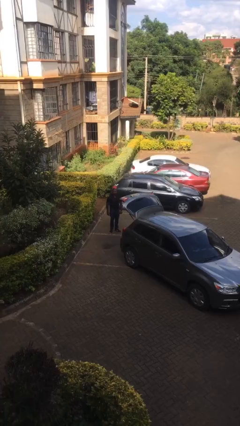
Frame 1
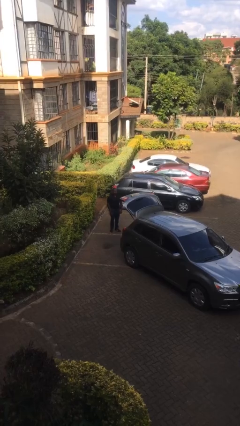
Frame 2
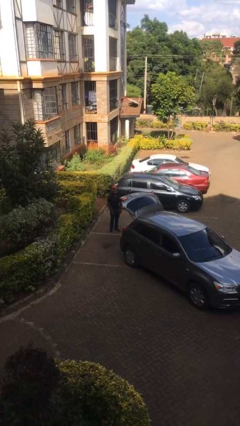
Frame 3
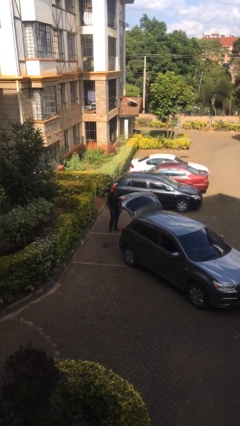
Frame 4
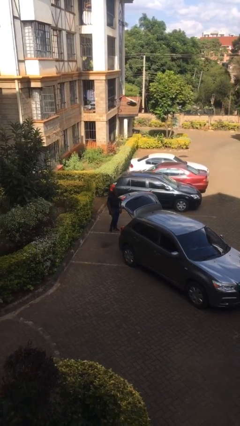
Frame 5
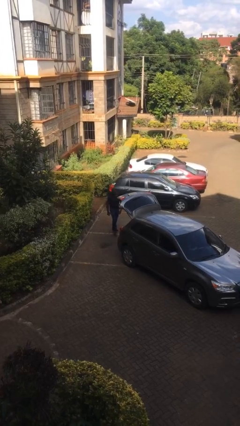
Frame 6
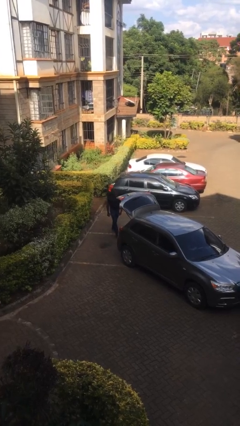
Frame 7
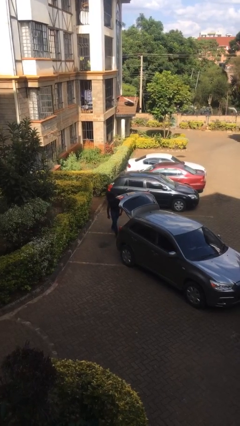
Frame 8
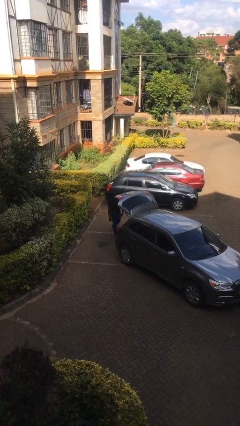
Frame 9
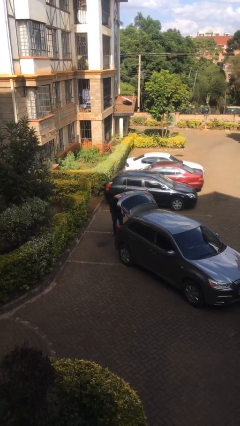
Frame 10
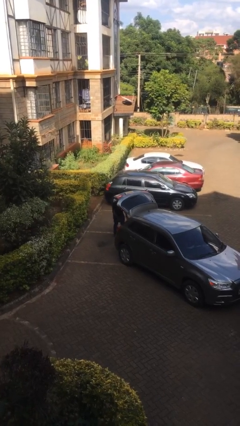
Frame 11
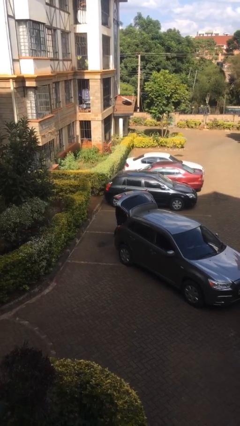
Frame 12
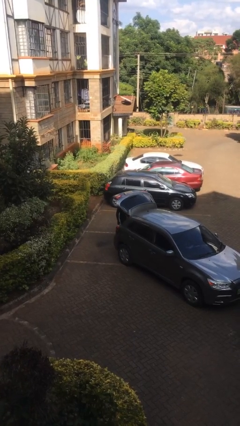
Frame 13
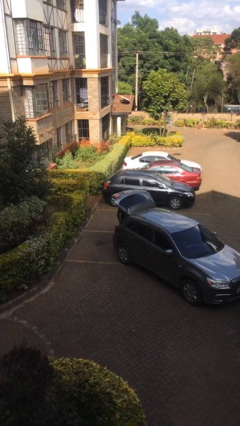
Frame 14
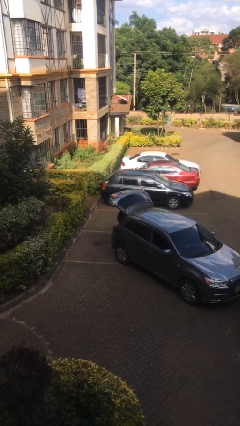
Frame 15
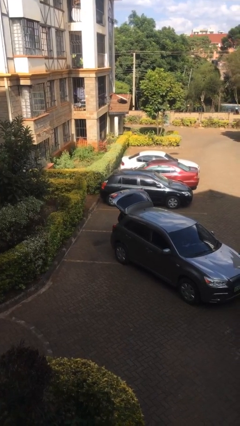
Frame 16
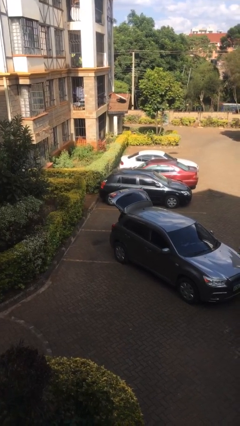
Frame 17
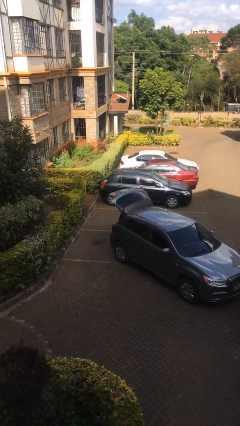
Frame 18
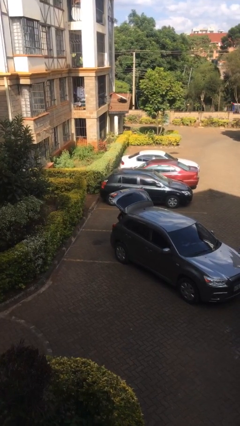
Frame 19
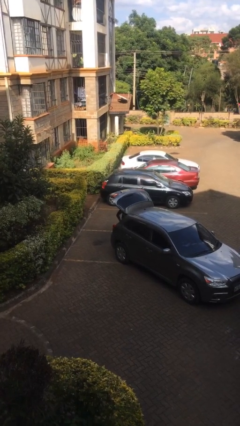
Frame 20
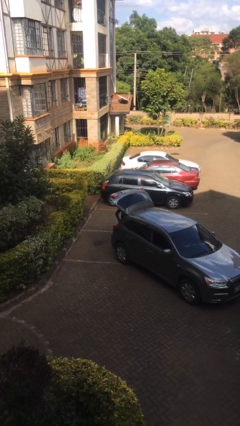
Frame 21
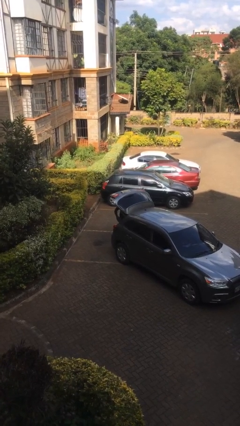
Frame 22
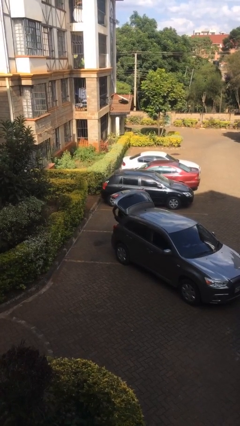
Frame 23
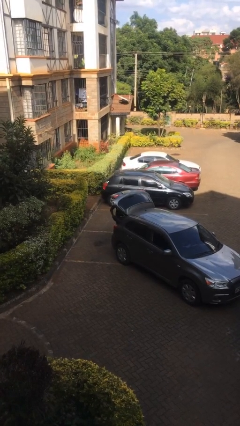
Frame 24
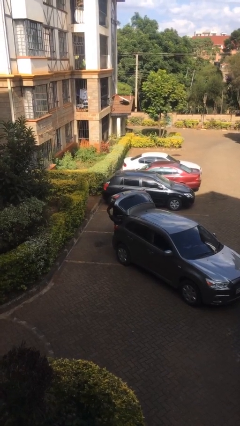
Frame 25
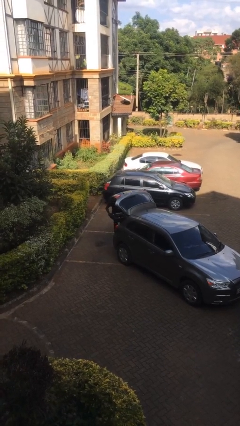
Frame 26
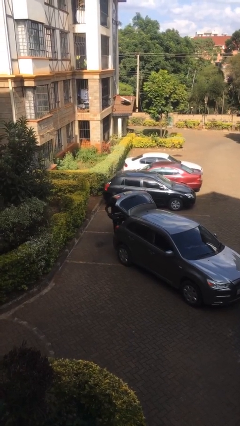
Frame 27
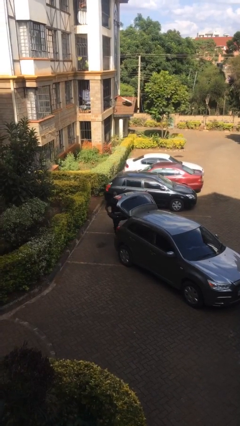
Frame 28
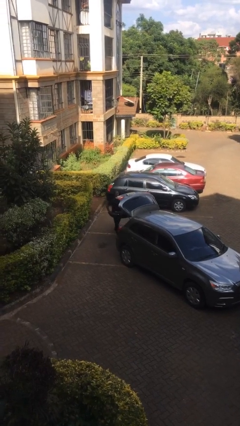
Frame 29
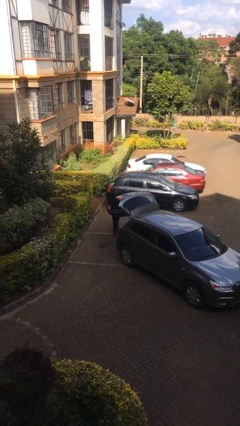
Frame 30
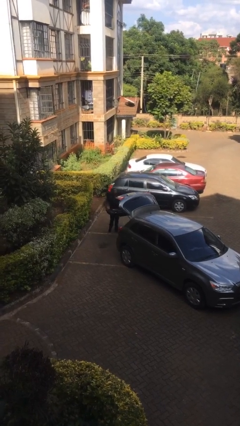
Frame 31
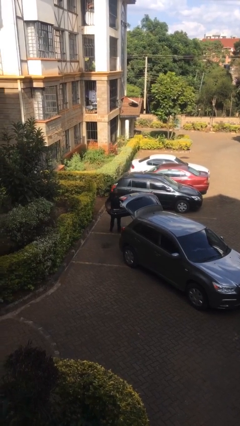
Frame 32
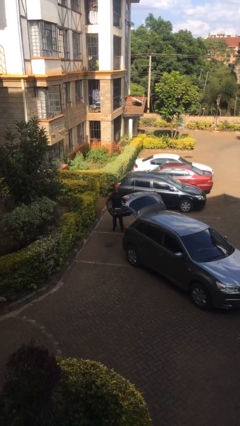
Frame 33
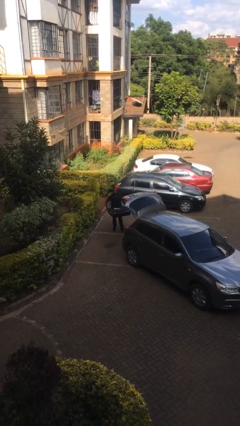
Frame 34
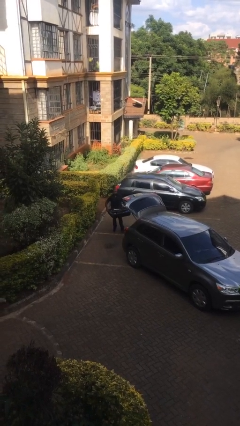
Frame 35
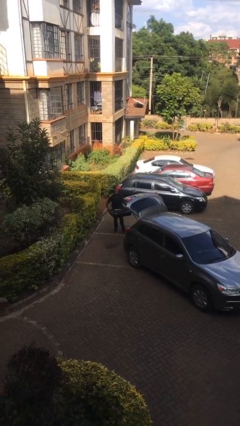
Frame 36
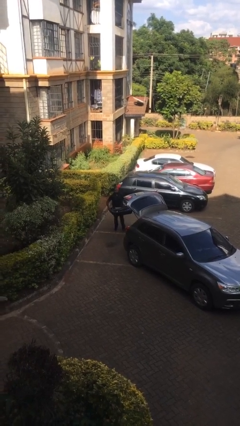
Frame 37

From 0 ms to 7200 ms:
person unloads car

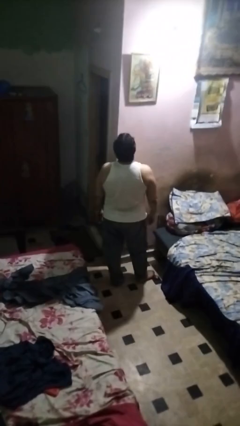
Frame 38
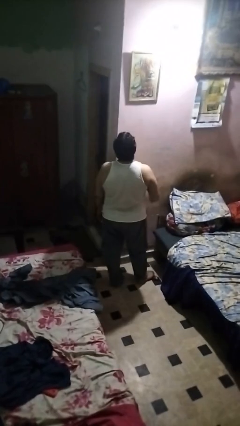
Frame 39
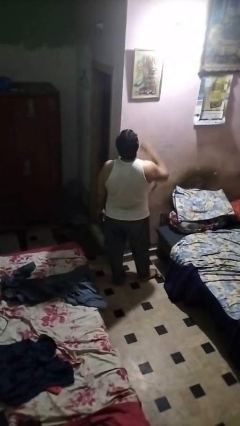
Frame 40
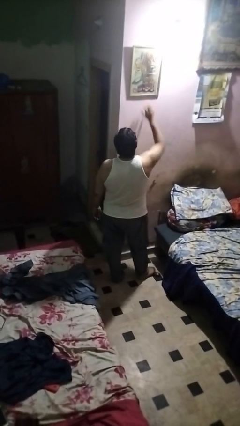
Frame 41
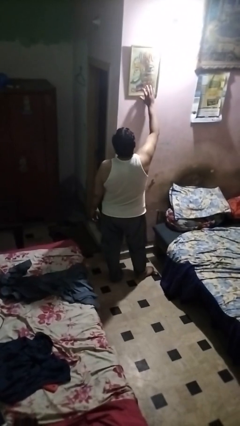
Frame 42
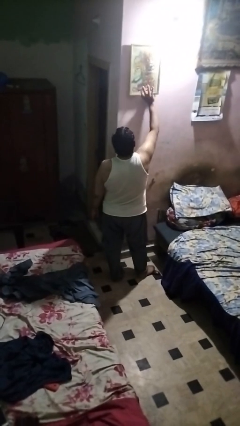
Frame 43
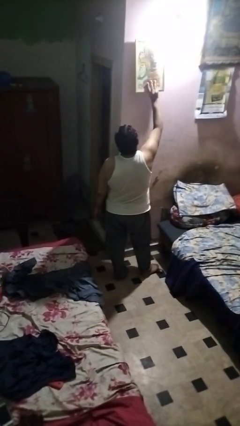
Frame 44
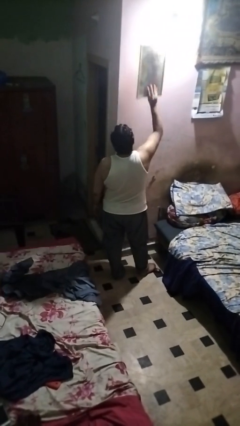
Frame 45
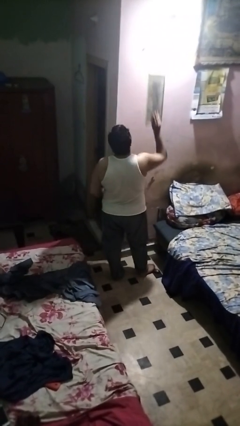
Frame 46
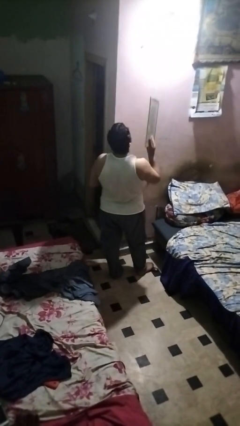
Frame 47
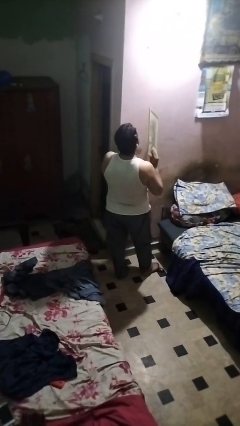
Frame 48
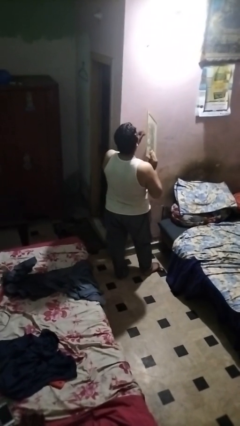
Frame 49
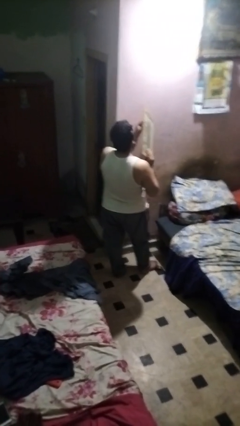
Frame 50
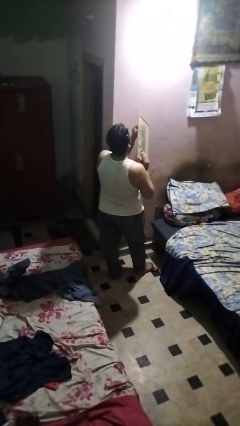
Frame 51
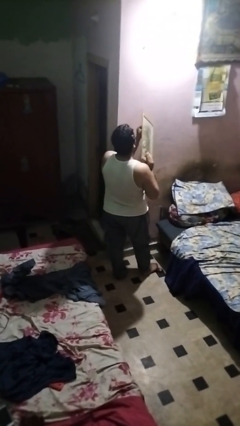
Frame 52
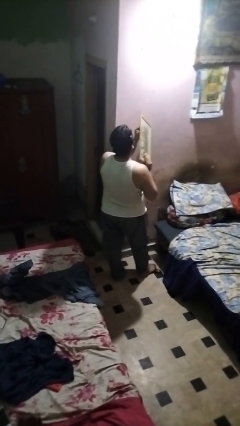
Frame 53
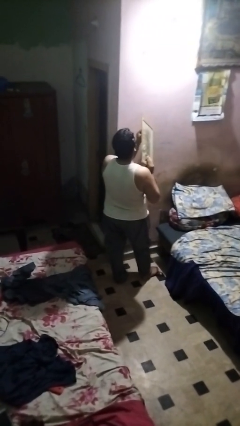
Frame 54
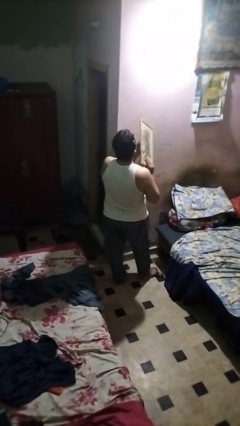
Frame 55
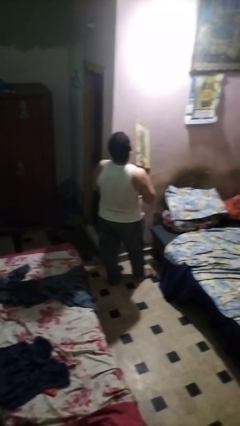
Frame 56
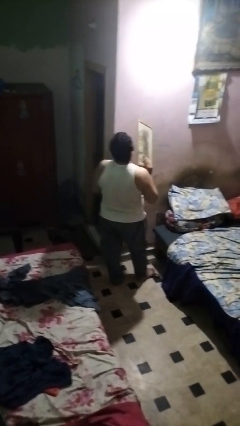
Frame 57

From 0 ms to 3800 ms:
person takes down picture frame

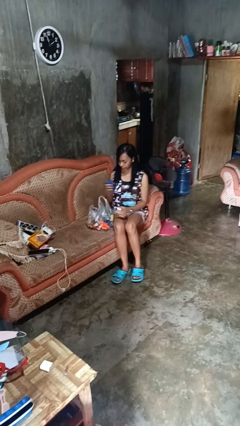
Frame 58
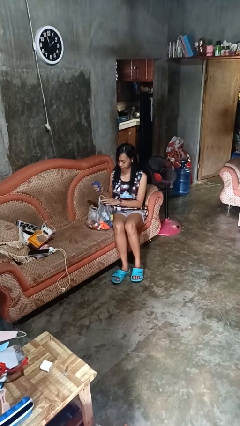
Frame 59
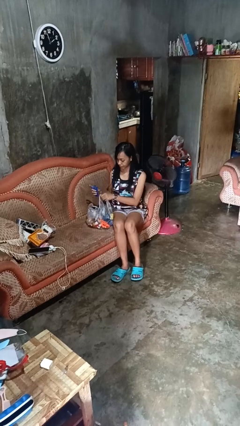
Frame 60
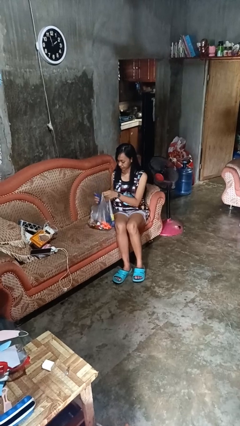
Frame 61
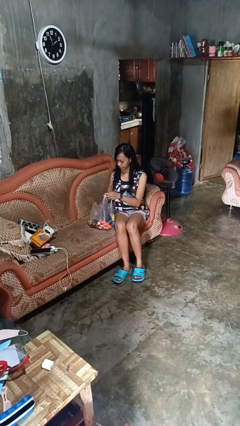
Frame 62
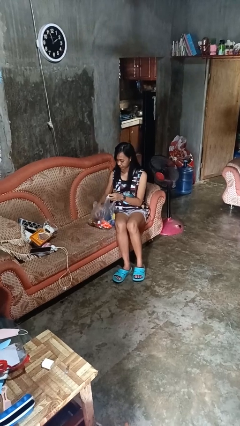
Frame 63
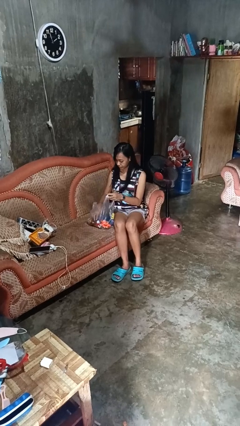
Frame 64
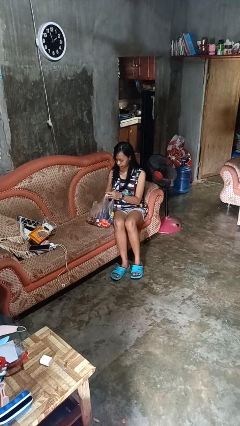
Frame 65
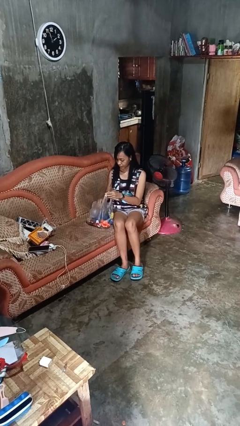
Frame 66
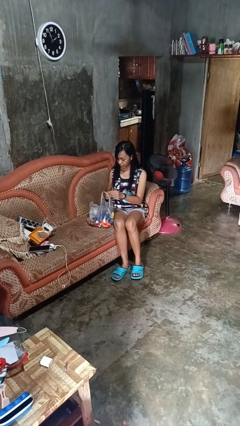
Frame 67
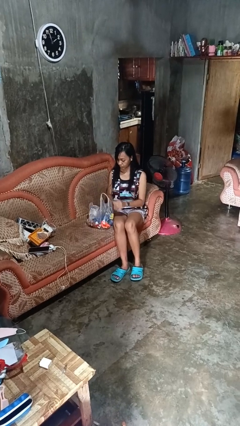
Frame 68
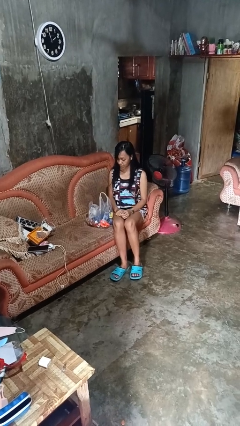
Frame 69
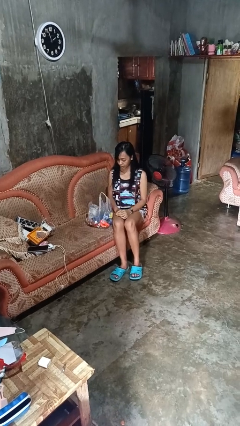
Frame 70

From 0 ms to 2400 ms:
person puts object into bag

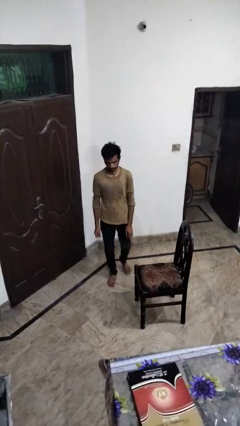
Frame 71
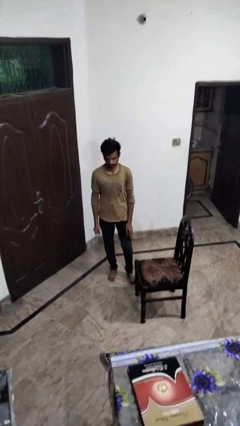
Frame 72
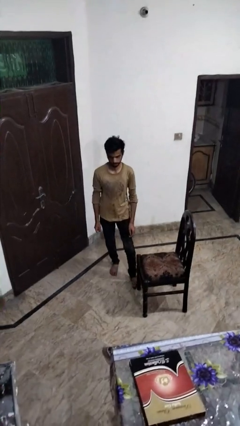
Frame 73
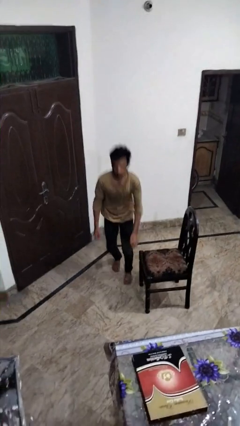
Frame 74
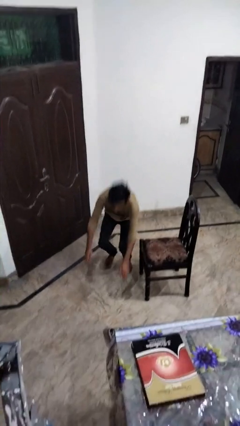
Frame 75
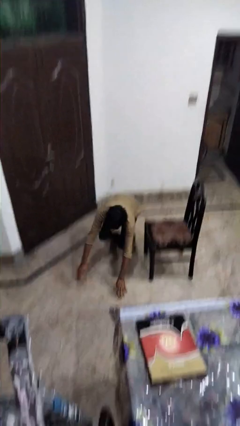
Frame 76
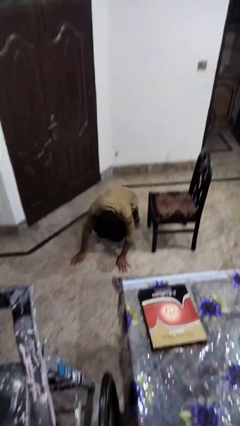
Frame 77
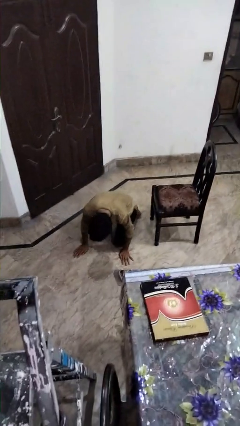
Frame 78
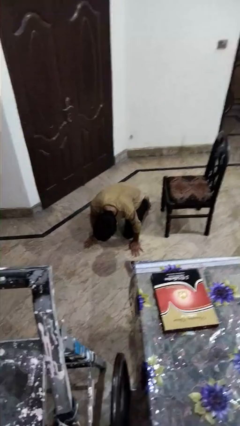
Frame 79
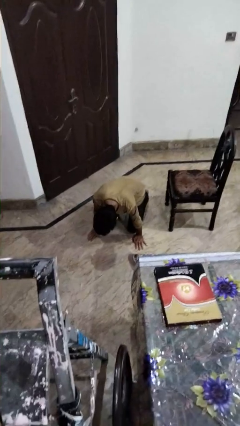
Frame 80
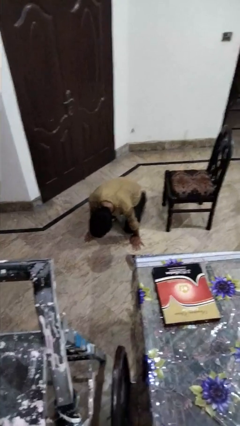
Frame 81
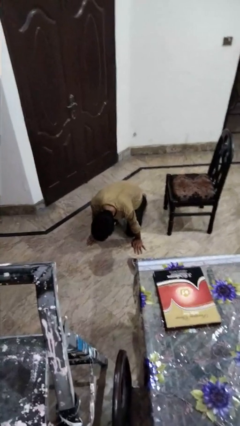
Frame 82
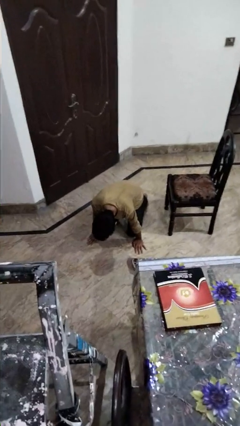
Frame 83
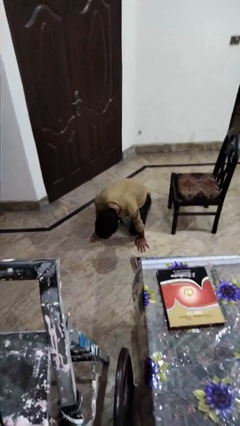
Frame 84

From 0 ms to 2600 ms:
person trips on object on floor

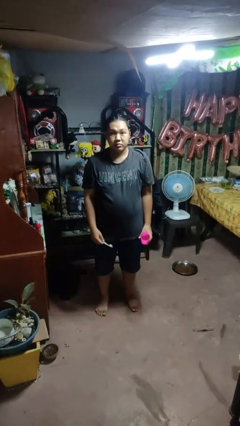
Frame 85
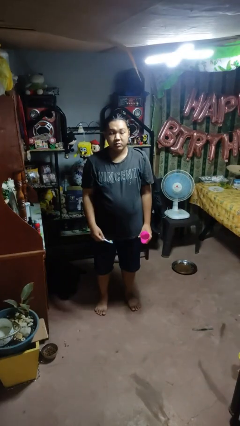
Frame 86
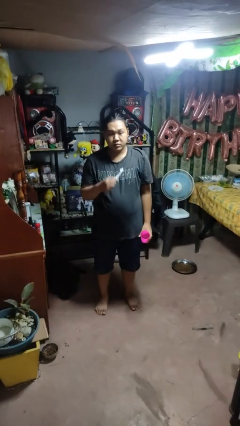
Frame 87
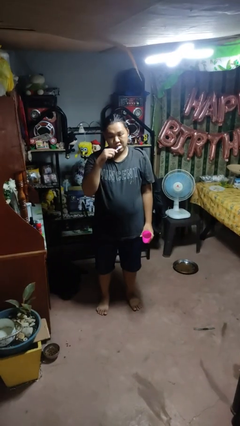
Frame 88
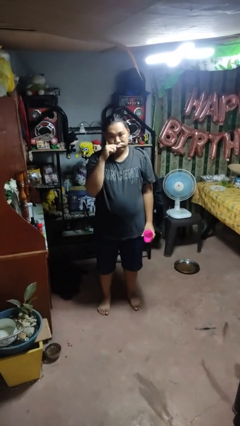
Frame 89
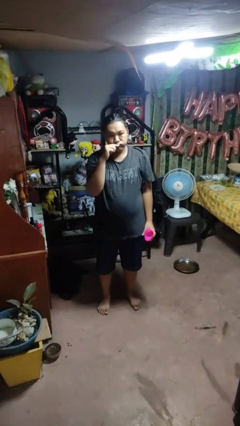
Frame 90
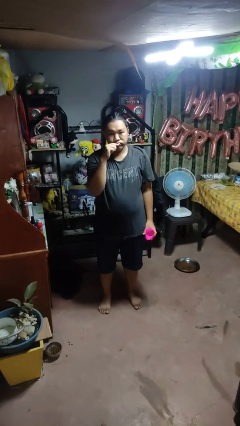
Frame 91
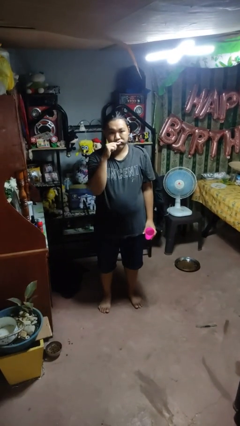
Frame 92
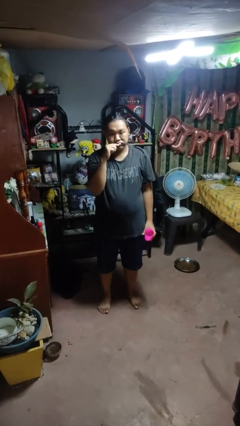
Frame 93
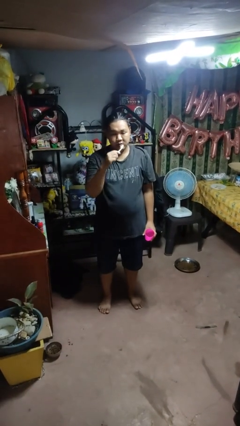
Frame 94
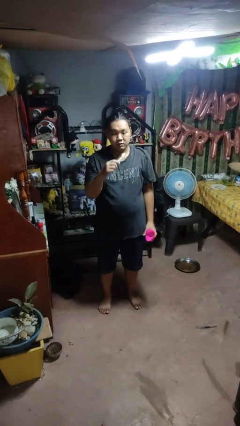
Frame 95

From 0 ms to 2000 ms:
person brushes teeth
